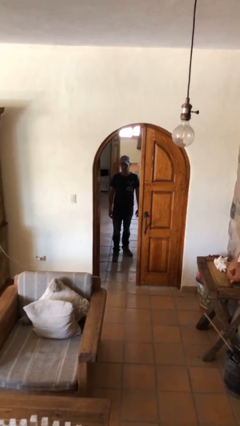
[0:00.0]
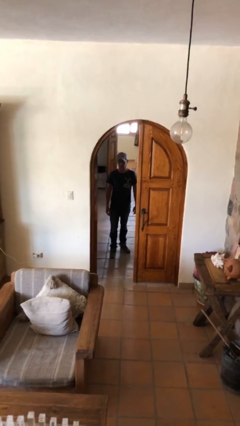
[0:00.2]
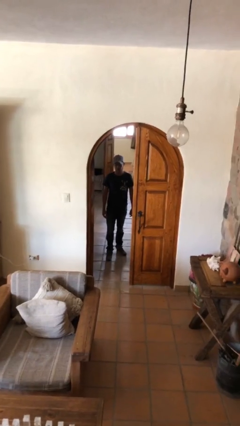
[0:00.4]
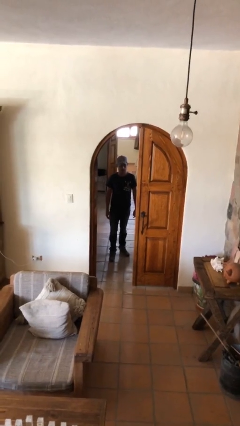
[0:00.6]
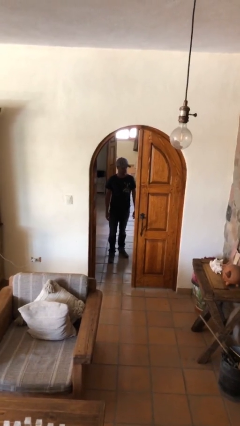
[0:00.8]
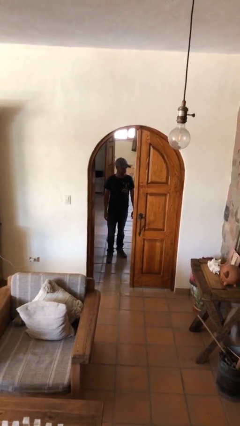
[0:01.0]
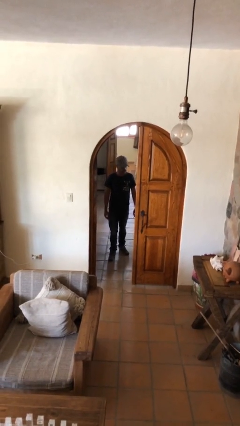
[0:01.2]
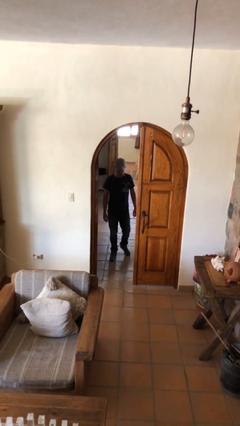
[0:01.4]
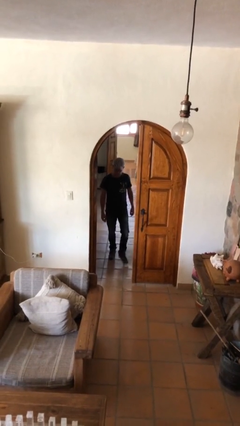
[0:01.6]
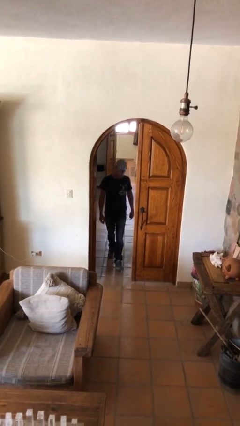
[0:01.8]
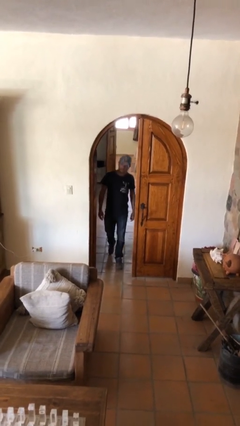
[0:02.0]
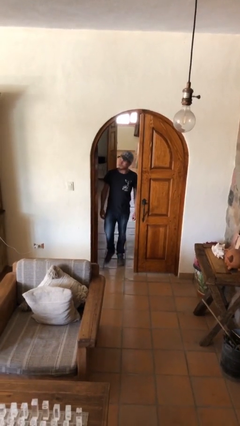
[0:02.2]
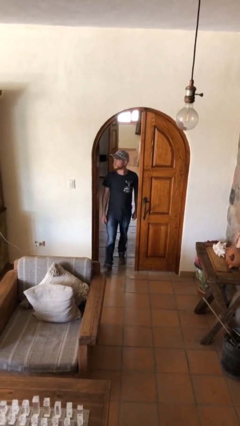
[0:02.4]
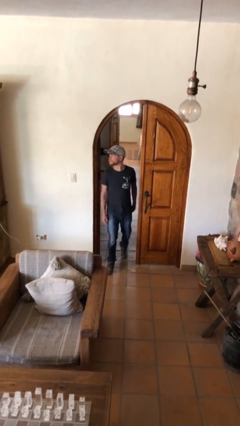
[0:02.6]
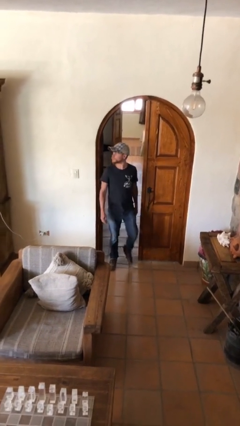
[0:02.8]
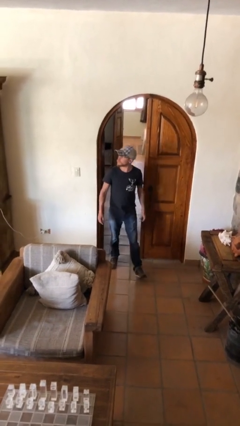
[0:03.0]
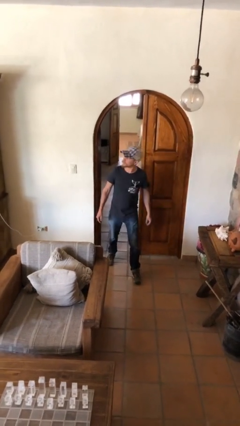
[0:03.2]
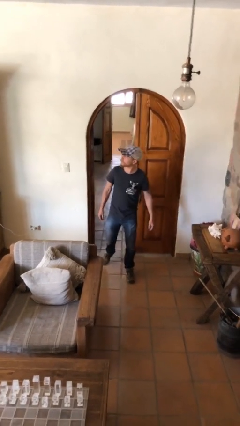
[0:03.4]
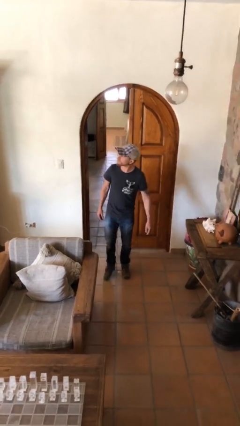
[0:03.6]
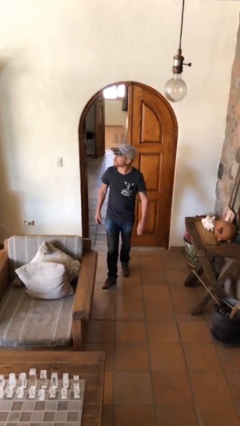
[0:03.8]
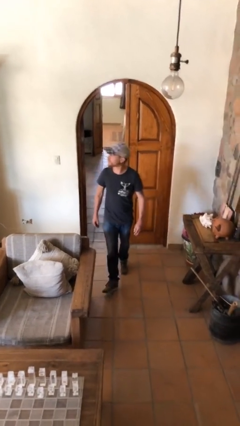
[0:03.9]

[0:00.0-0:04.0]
person enters scene through structure

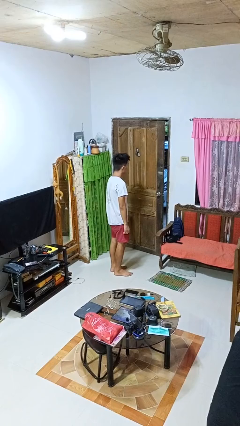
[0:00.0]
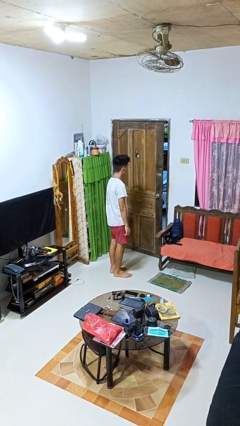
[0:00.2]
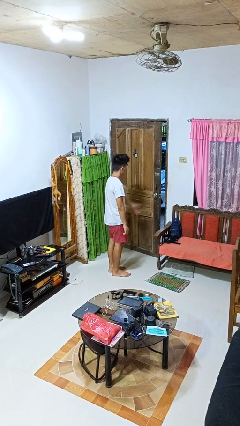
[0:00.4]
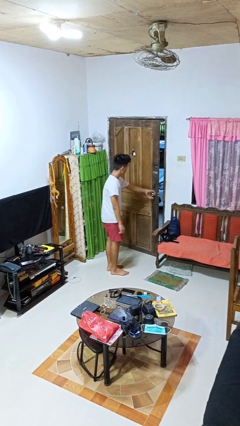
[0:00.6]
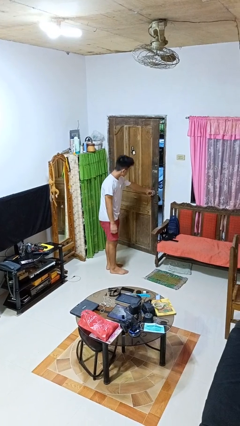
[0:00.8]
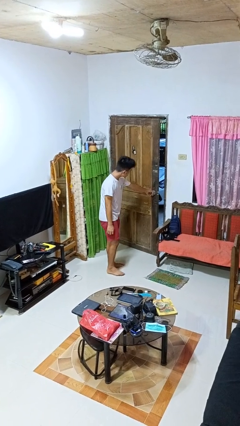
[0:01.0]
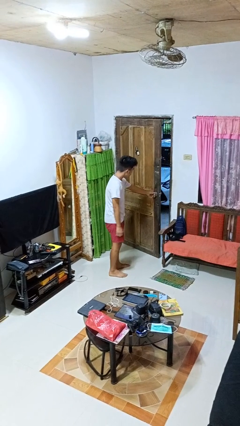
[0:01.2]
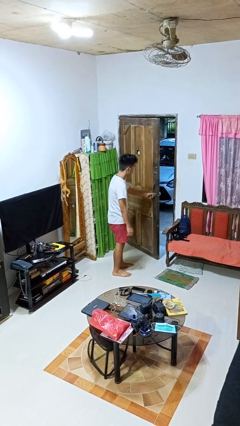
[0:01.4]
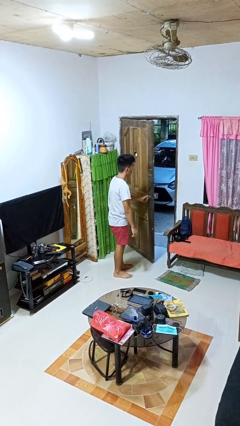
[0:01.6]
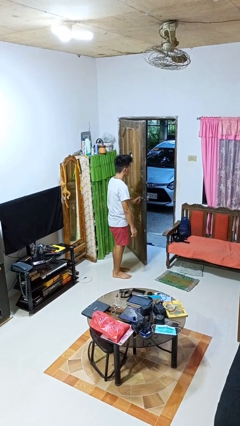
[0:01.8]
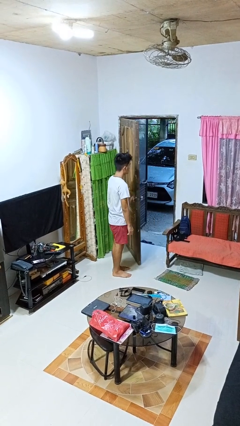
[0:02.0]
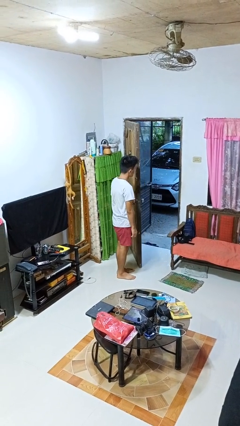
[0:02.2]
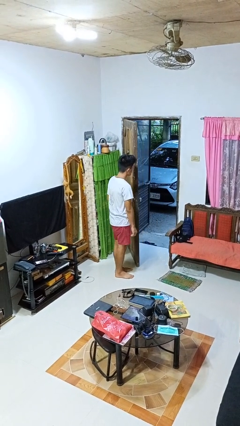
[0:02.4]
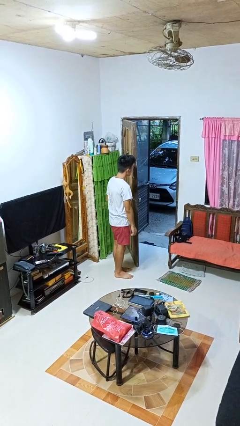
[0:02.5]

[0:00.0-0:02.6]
person opens facility door

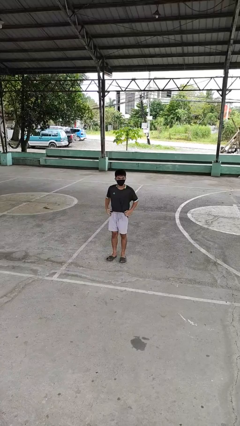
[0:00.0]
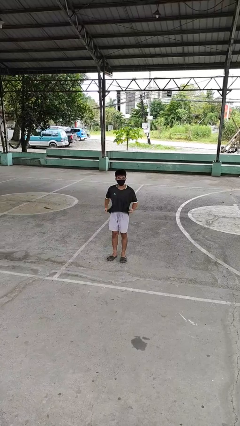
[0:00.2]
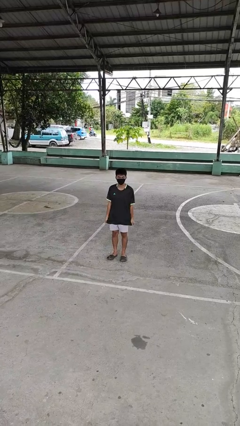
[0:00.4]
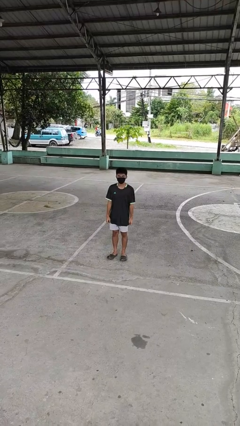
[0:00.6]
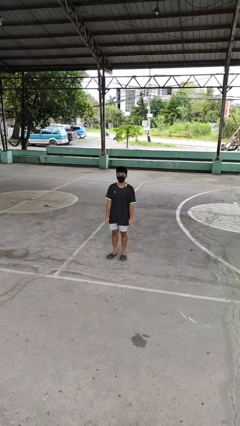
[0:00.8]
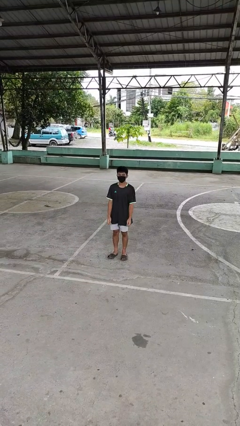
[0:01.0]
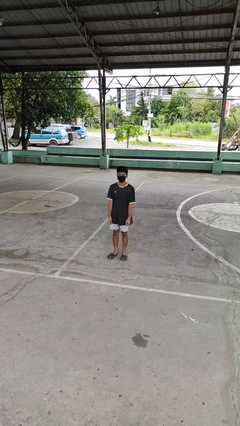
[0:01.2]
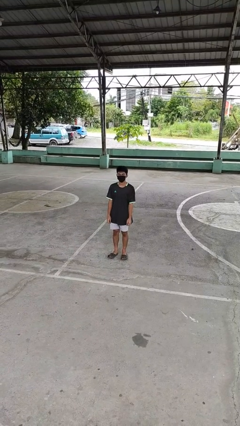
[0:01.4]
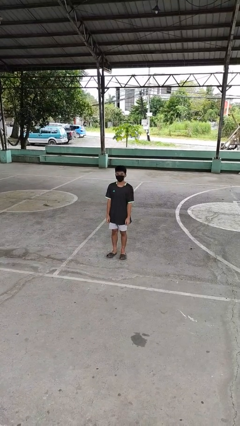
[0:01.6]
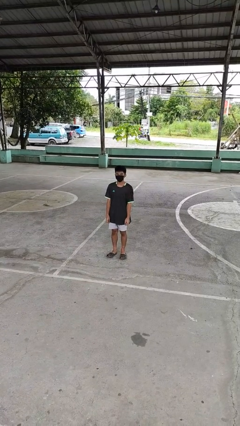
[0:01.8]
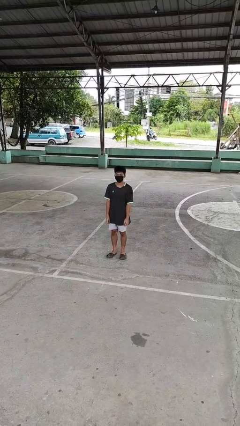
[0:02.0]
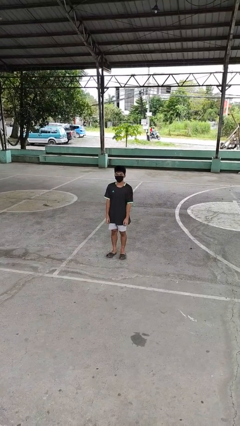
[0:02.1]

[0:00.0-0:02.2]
person untucks shirt

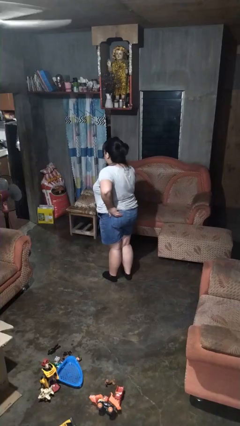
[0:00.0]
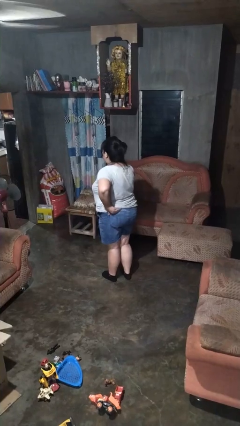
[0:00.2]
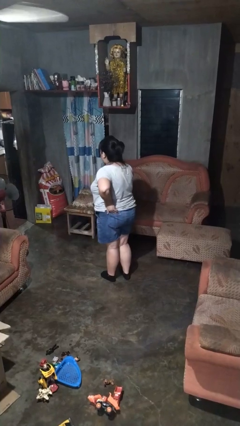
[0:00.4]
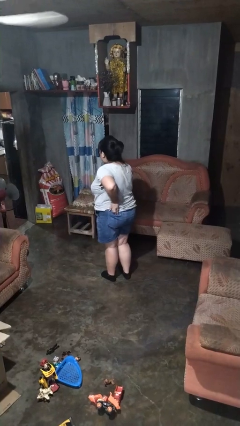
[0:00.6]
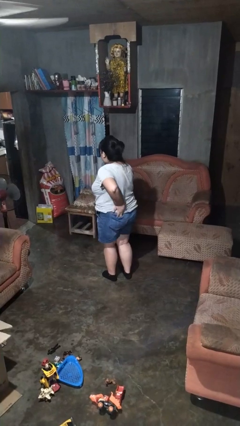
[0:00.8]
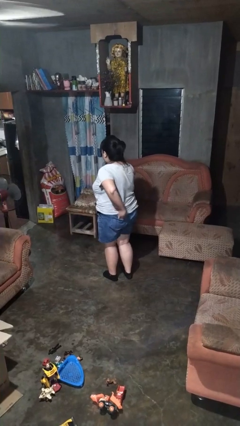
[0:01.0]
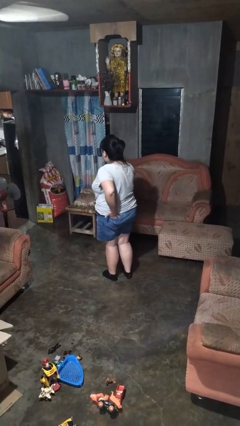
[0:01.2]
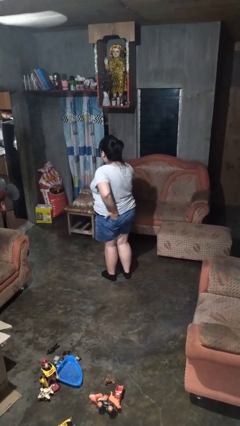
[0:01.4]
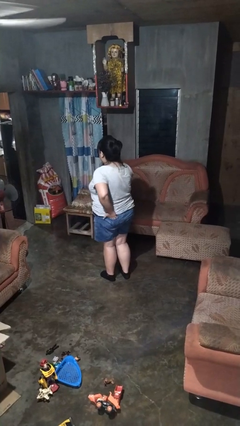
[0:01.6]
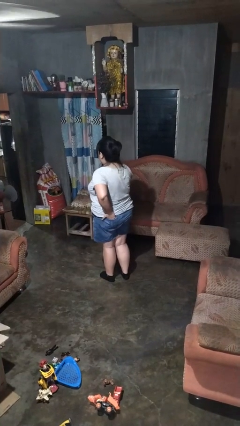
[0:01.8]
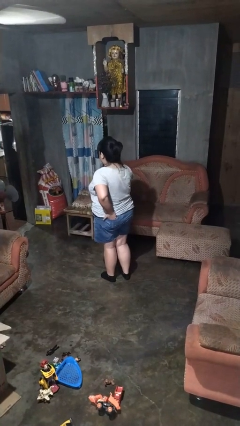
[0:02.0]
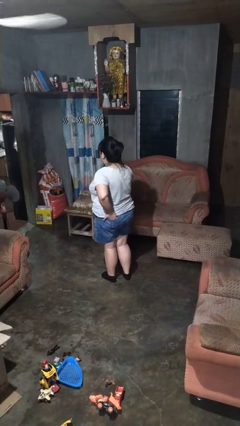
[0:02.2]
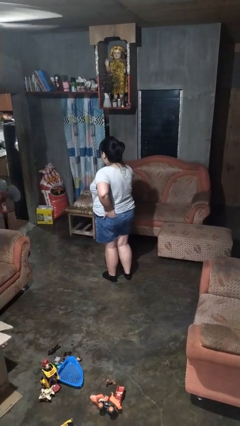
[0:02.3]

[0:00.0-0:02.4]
person puts hands in back pockets

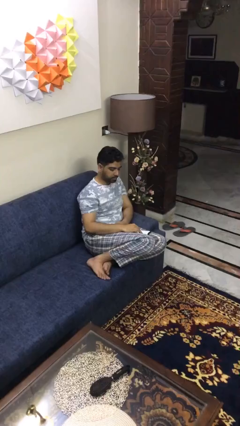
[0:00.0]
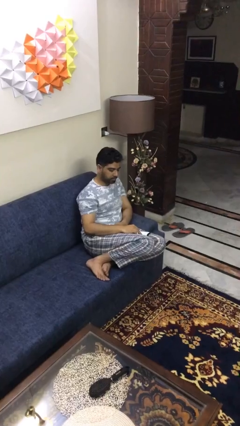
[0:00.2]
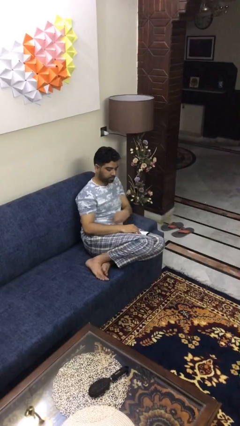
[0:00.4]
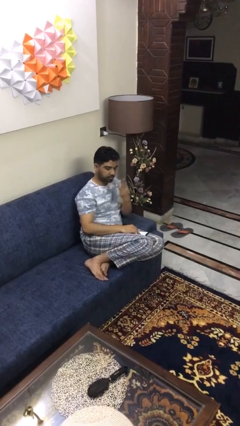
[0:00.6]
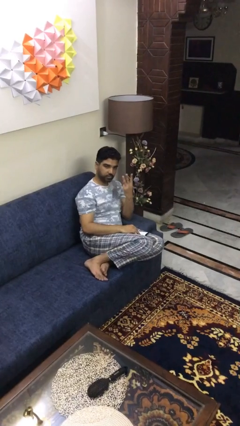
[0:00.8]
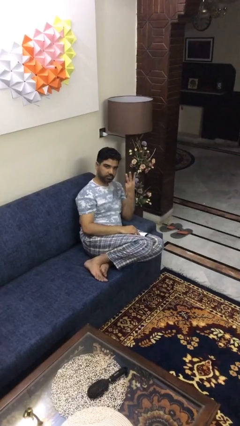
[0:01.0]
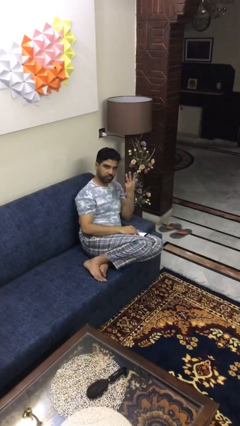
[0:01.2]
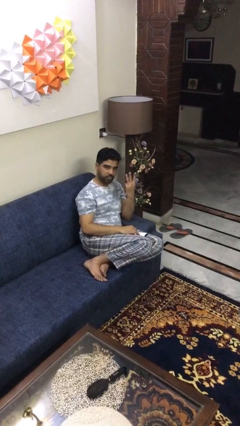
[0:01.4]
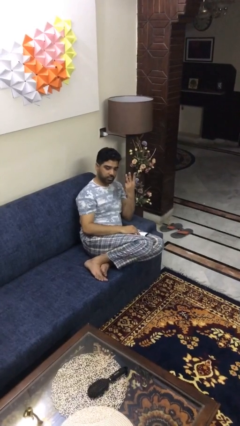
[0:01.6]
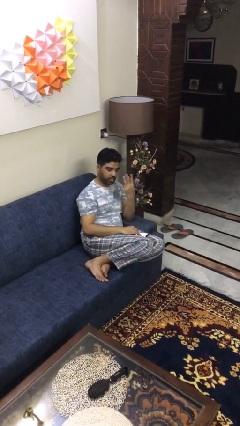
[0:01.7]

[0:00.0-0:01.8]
person gestures number three

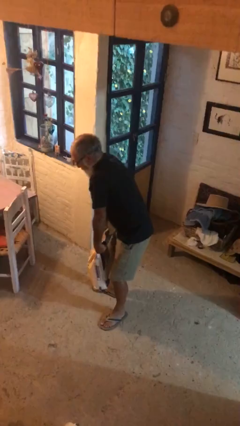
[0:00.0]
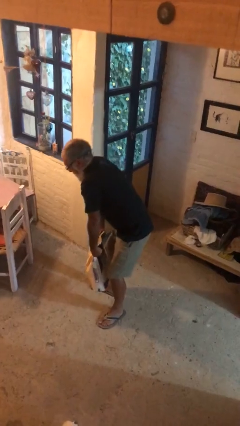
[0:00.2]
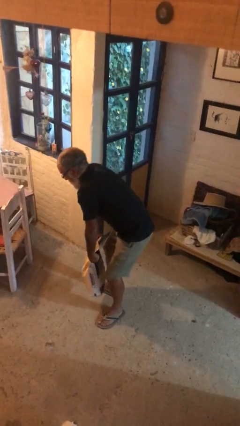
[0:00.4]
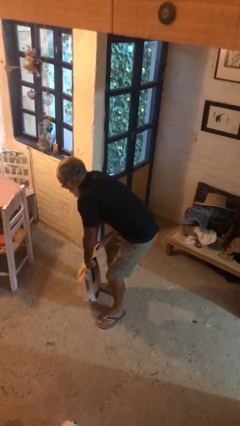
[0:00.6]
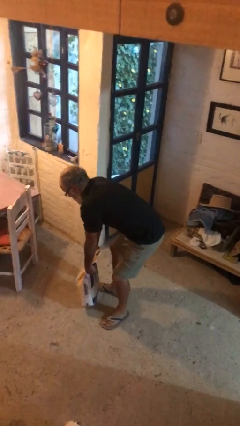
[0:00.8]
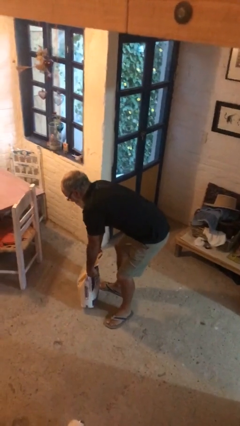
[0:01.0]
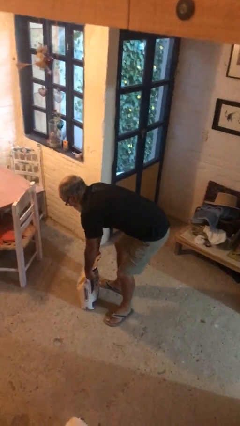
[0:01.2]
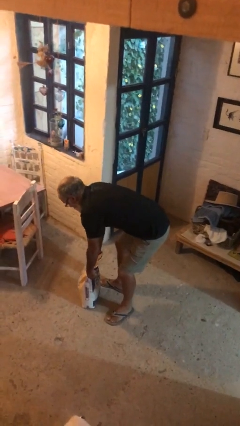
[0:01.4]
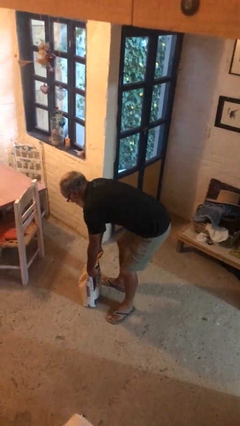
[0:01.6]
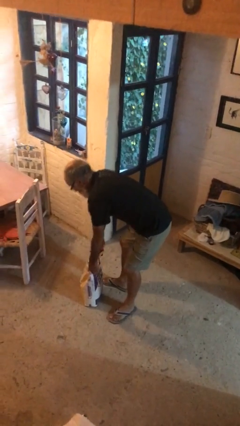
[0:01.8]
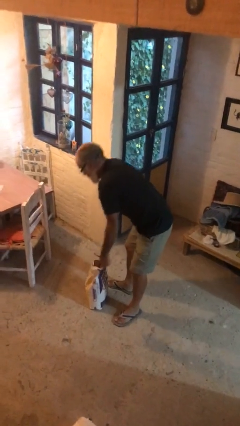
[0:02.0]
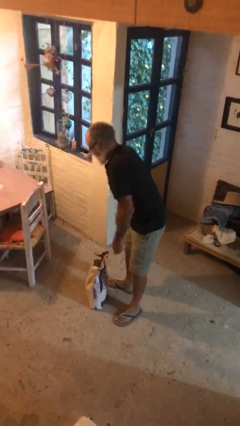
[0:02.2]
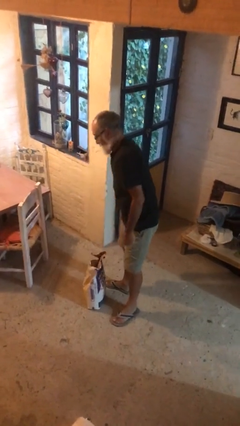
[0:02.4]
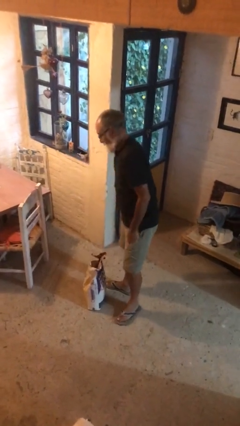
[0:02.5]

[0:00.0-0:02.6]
person puts down object on floor

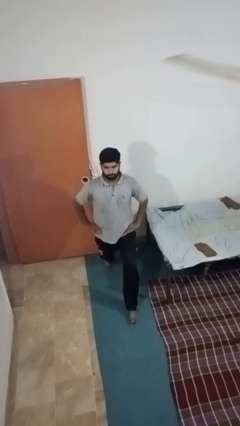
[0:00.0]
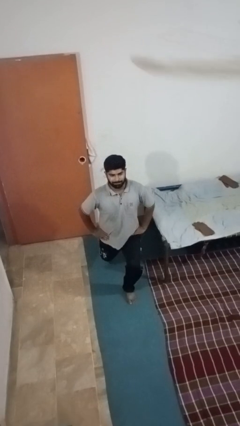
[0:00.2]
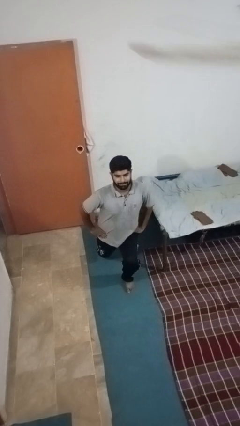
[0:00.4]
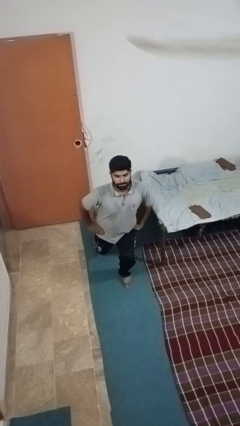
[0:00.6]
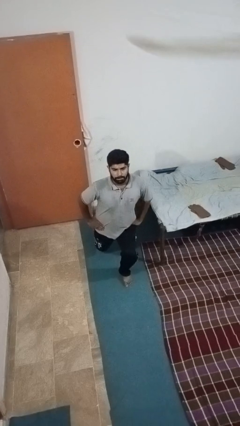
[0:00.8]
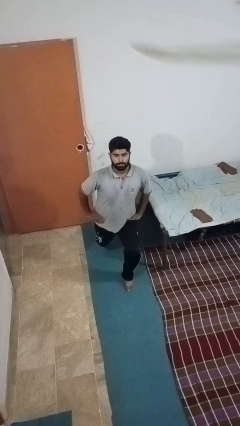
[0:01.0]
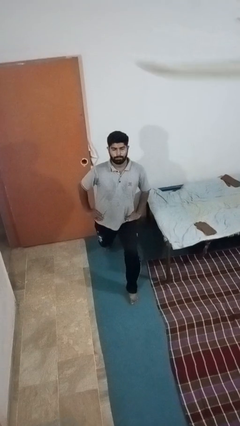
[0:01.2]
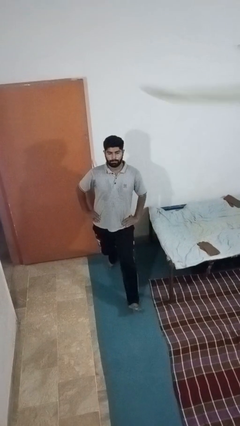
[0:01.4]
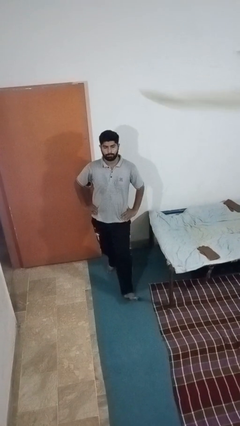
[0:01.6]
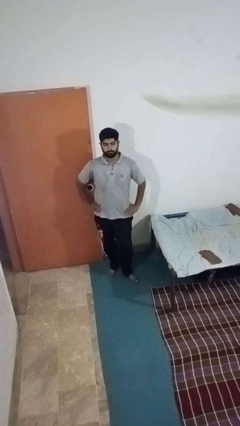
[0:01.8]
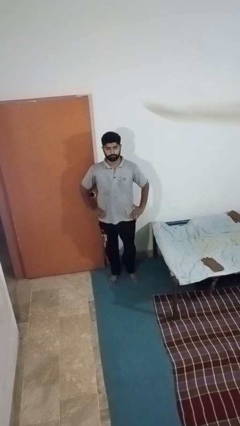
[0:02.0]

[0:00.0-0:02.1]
person exercises with lunges
